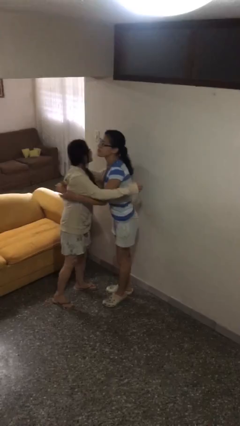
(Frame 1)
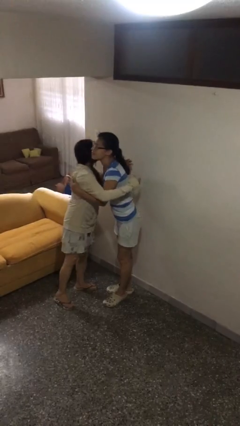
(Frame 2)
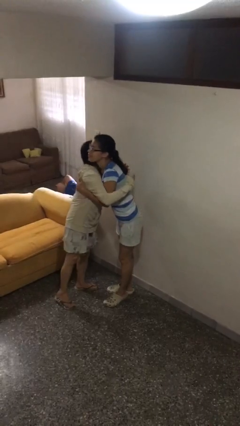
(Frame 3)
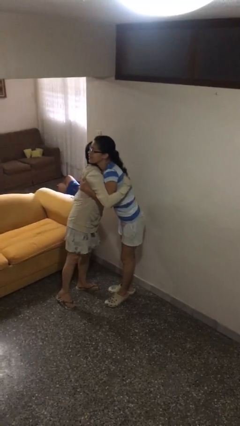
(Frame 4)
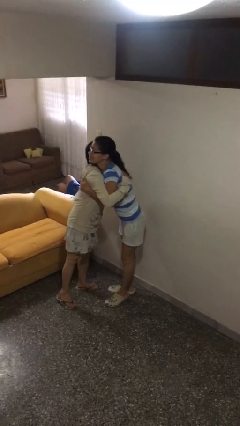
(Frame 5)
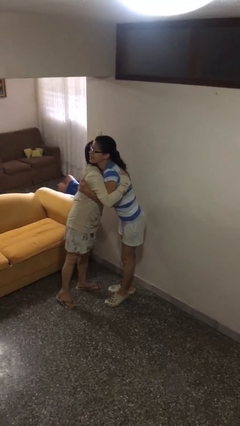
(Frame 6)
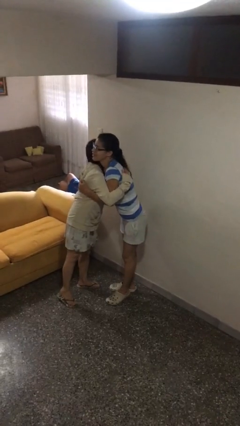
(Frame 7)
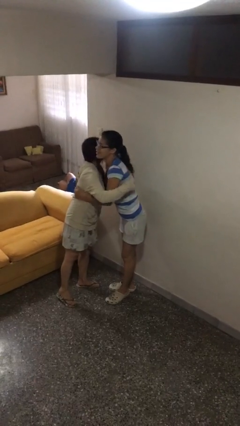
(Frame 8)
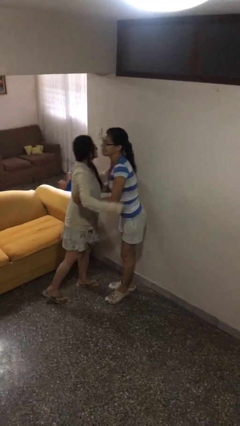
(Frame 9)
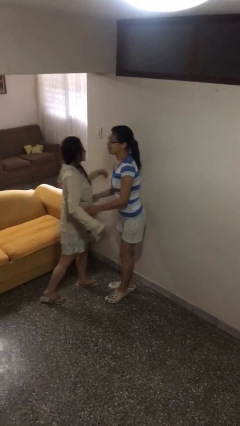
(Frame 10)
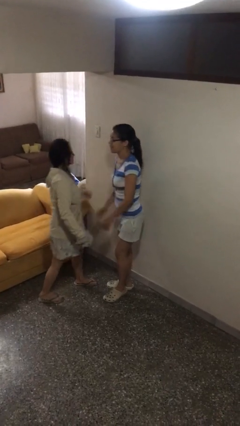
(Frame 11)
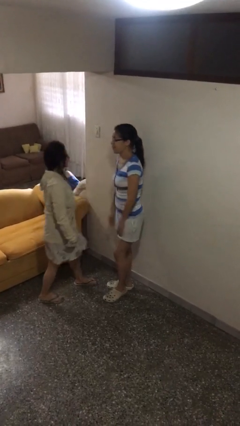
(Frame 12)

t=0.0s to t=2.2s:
person embraces person

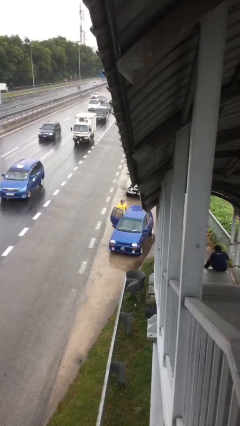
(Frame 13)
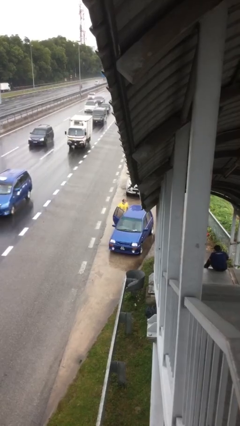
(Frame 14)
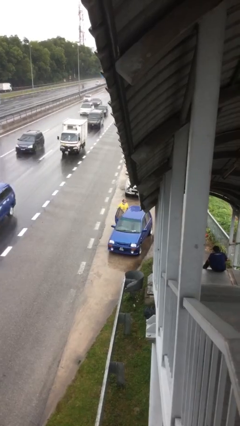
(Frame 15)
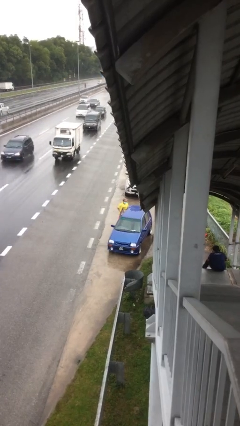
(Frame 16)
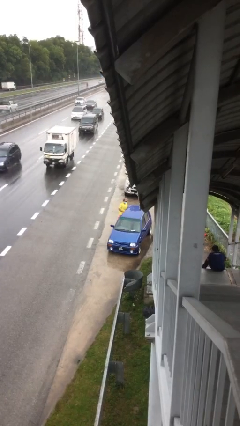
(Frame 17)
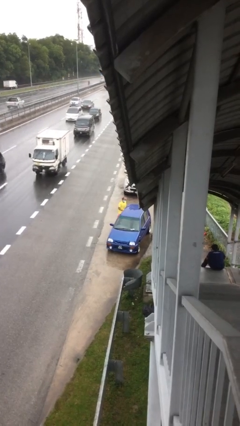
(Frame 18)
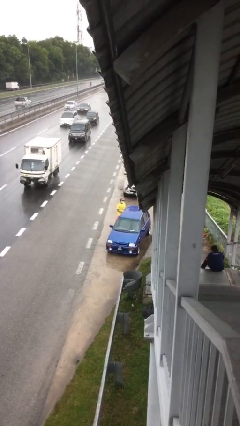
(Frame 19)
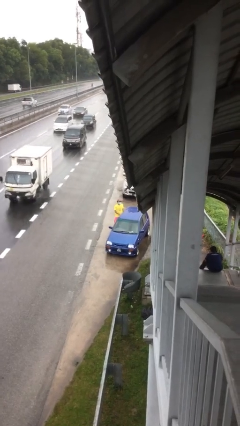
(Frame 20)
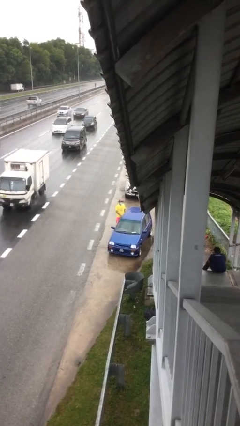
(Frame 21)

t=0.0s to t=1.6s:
person closes car door

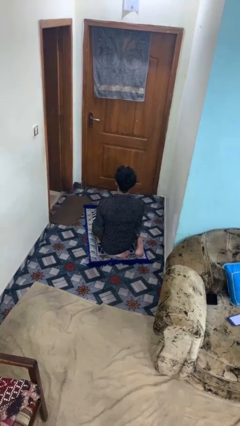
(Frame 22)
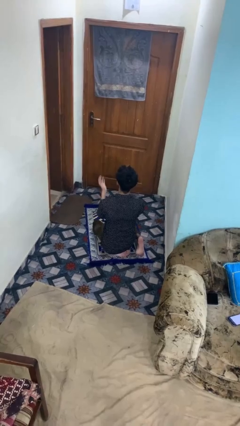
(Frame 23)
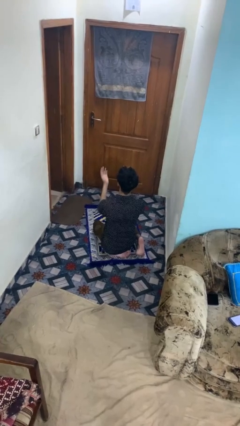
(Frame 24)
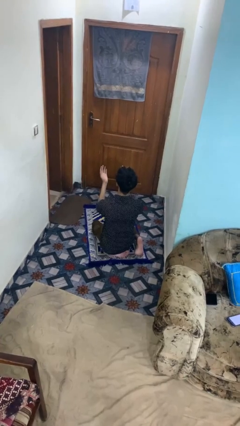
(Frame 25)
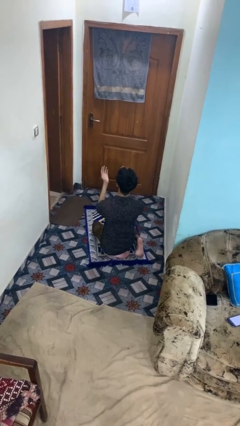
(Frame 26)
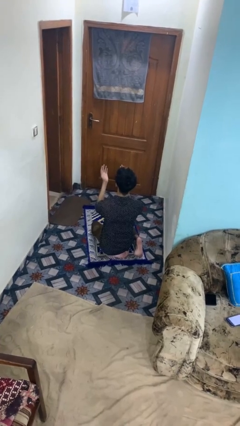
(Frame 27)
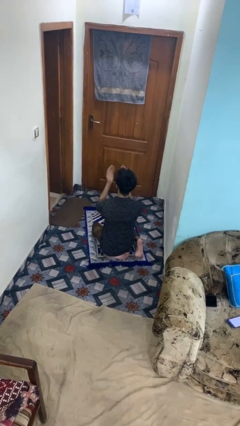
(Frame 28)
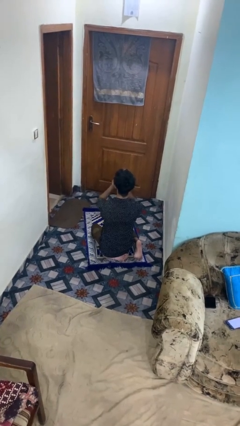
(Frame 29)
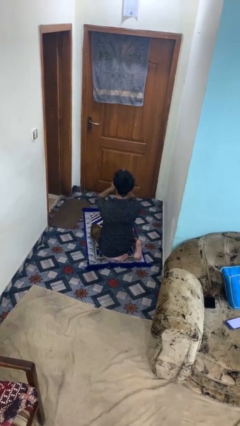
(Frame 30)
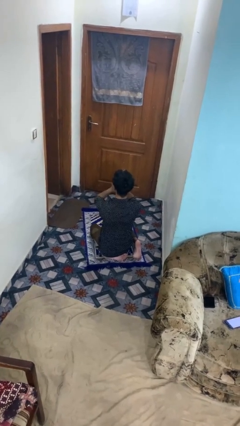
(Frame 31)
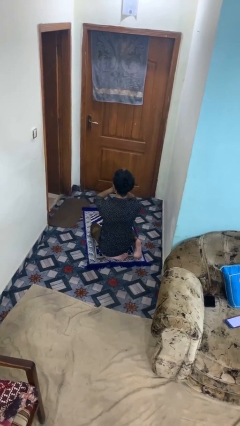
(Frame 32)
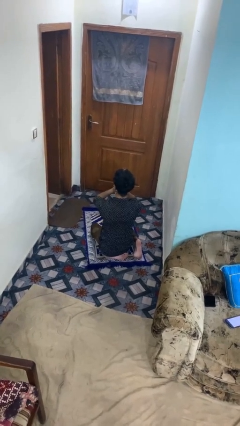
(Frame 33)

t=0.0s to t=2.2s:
person prays

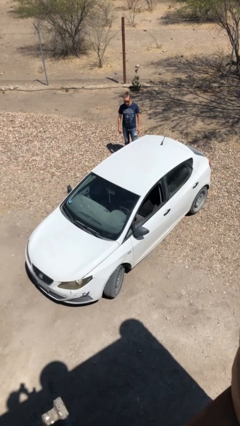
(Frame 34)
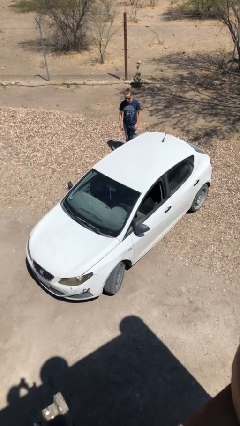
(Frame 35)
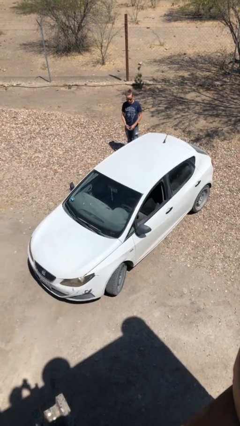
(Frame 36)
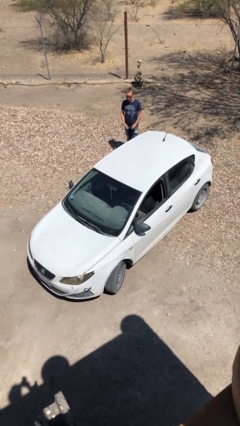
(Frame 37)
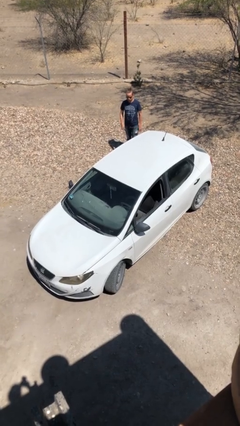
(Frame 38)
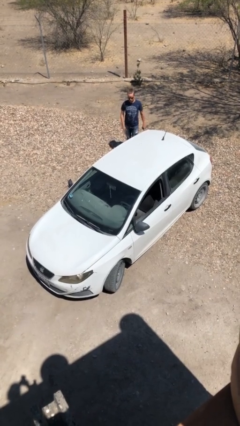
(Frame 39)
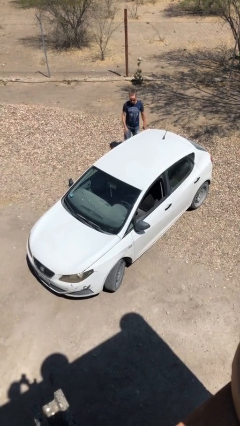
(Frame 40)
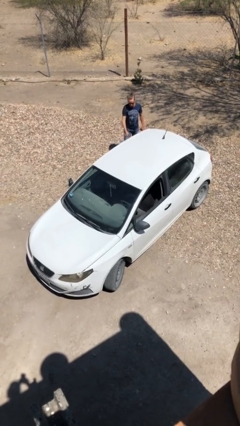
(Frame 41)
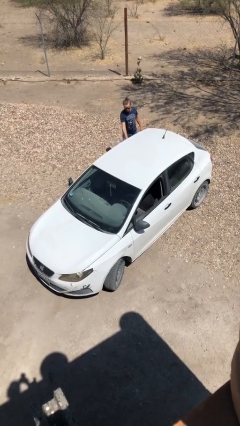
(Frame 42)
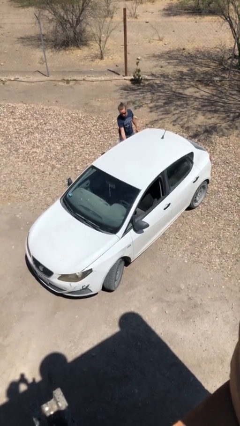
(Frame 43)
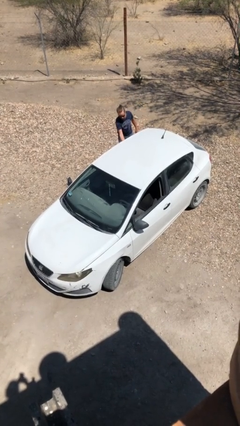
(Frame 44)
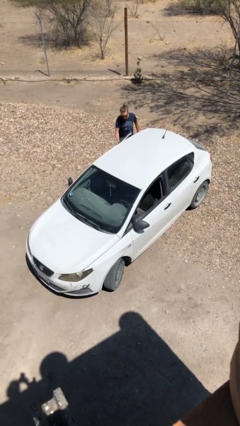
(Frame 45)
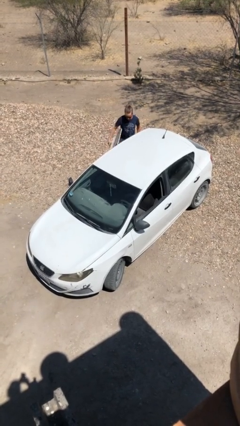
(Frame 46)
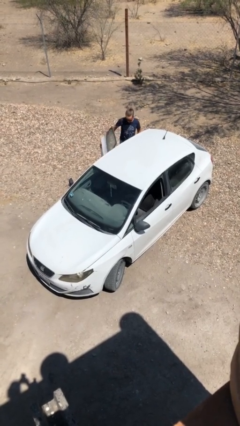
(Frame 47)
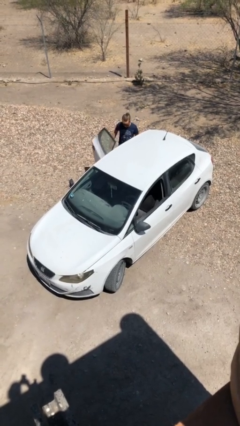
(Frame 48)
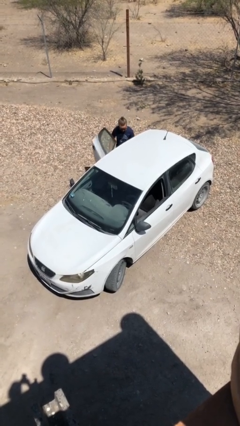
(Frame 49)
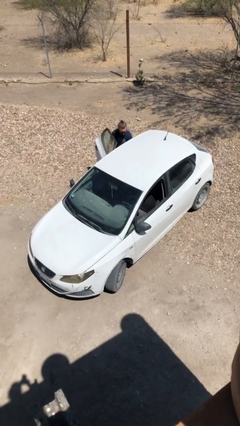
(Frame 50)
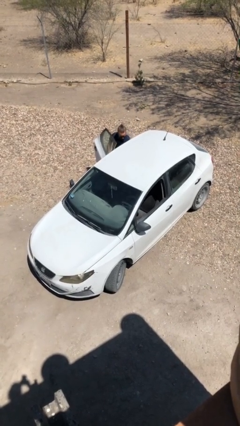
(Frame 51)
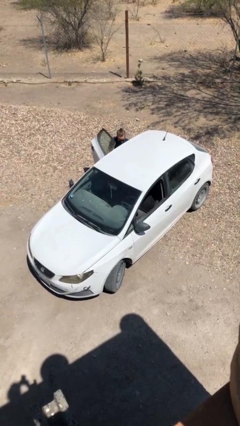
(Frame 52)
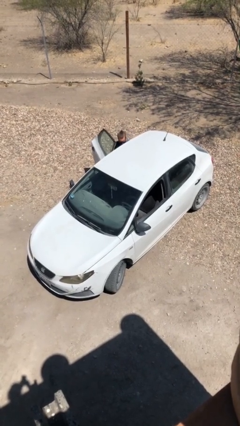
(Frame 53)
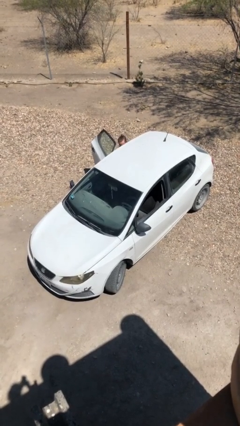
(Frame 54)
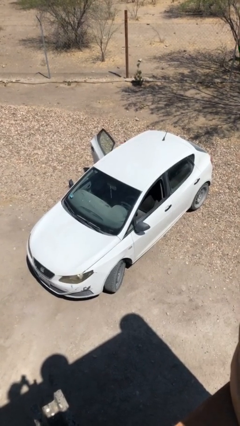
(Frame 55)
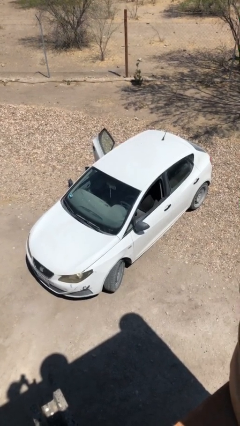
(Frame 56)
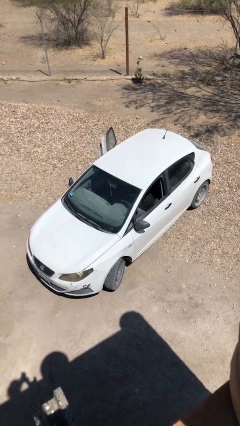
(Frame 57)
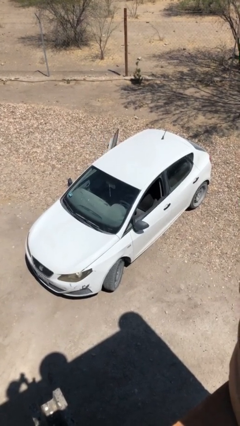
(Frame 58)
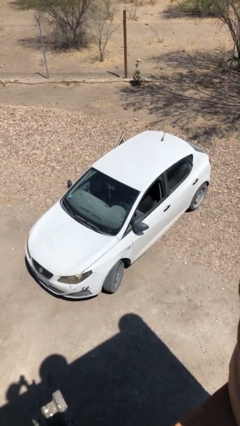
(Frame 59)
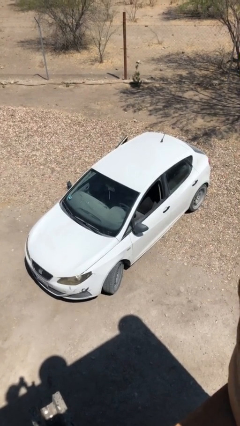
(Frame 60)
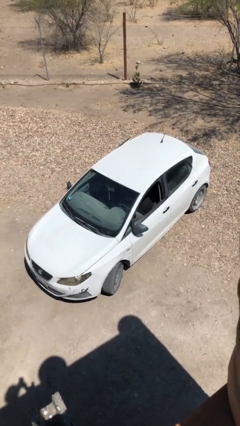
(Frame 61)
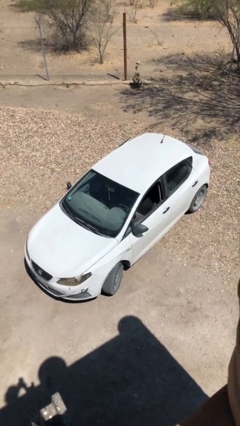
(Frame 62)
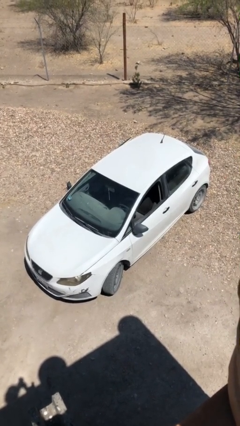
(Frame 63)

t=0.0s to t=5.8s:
car picks up person

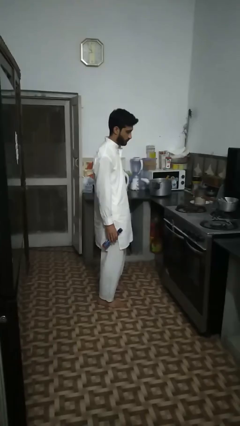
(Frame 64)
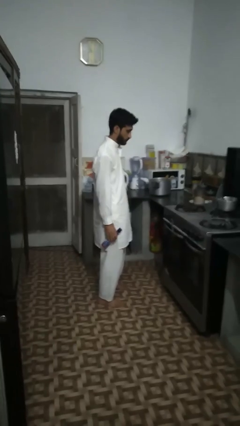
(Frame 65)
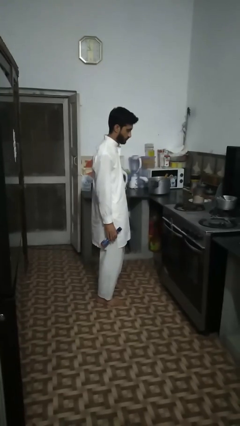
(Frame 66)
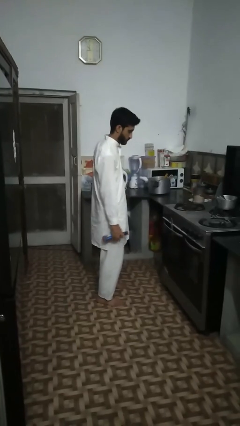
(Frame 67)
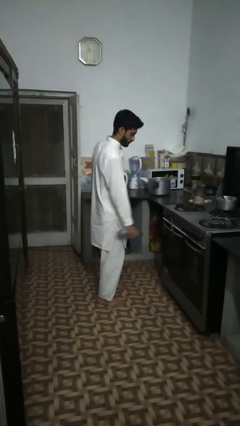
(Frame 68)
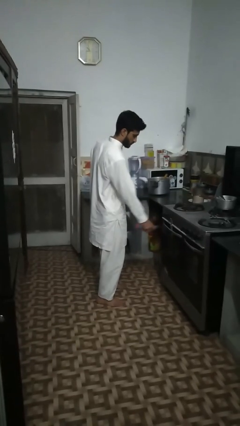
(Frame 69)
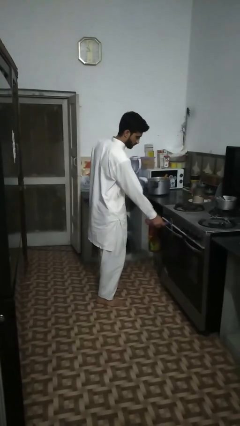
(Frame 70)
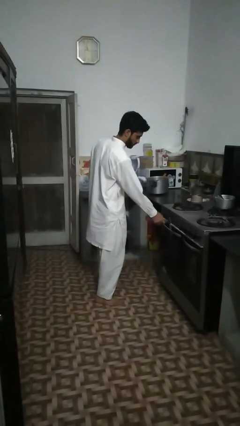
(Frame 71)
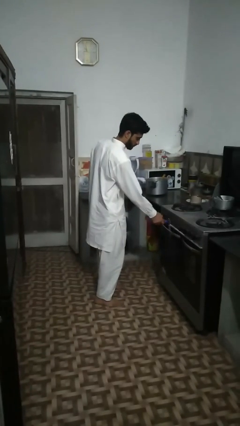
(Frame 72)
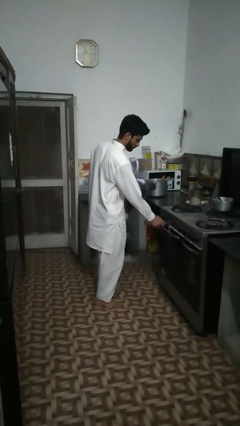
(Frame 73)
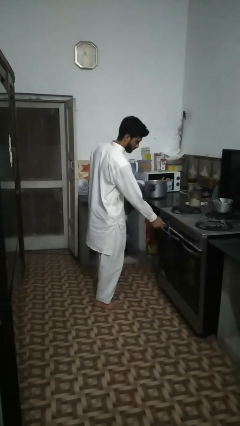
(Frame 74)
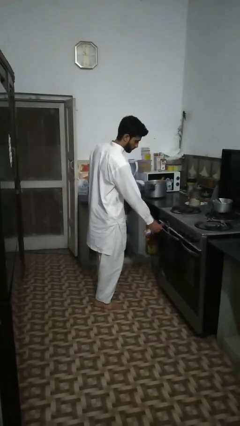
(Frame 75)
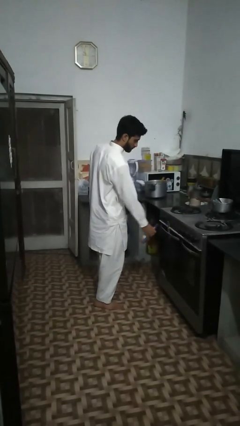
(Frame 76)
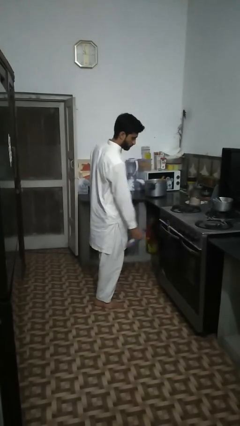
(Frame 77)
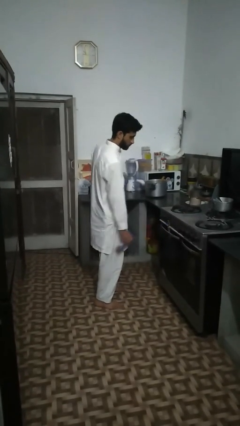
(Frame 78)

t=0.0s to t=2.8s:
person opens can with can opener

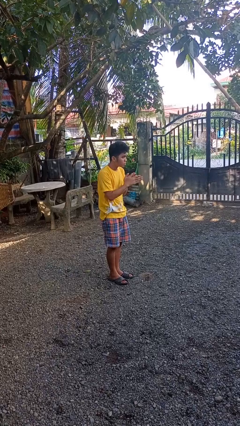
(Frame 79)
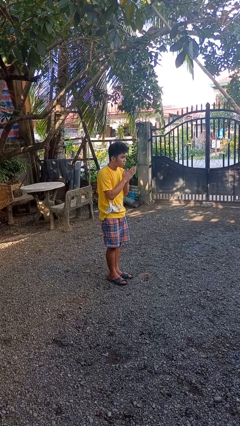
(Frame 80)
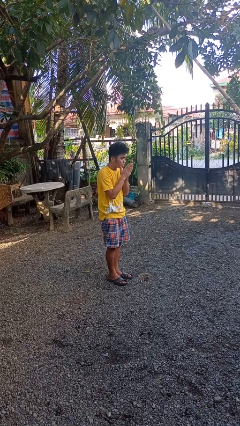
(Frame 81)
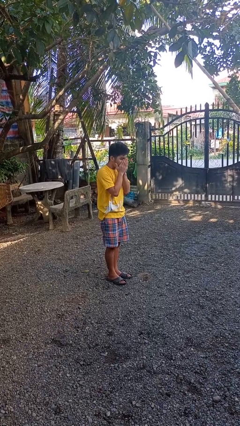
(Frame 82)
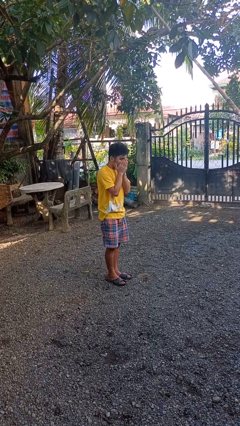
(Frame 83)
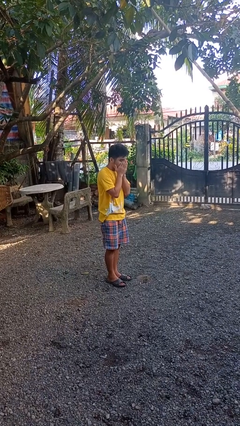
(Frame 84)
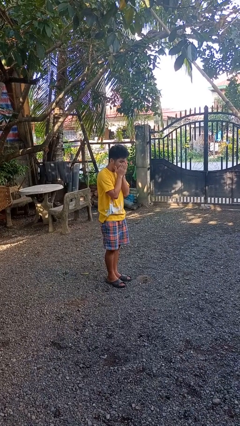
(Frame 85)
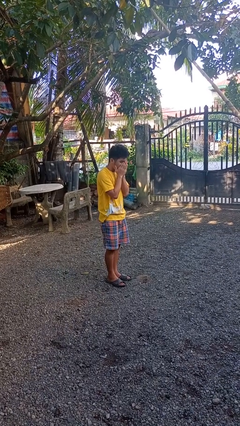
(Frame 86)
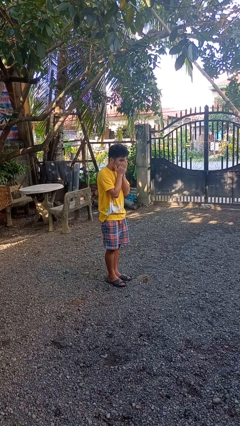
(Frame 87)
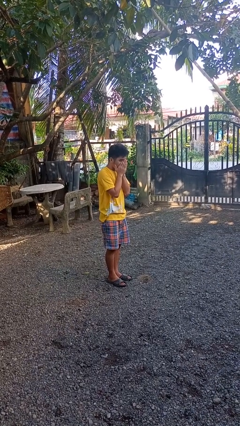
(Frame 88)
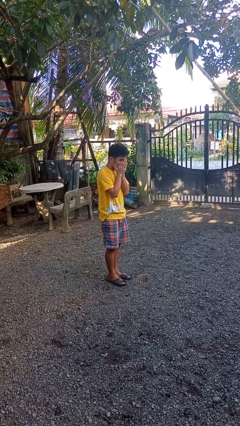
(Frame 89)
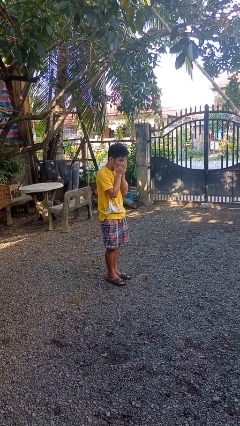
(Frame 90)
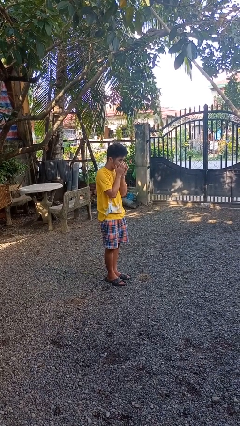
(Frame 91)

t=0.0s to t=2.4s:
person blows into hands

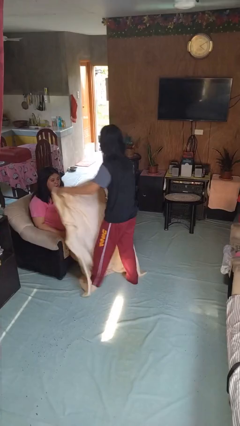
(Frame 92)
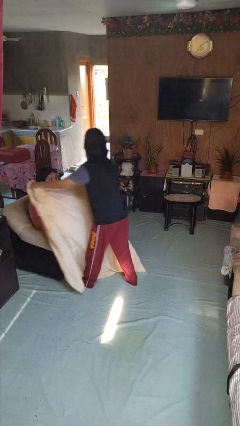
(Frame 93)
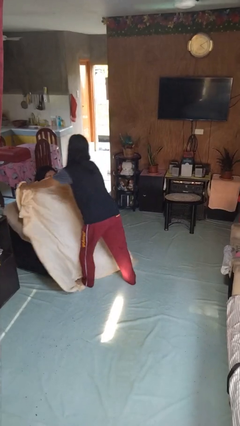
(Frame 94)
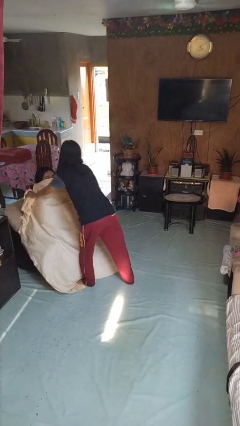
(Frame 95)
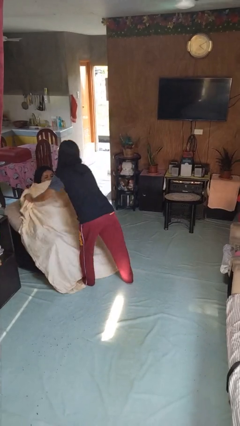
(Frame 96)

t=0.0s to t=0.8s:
person covers friend with blanket
